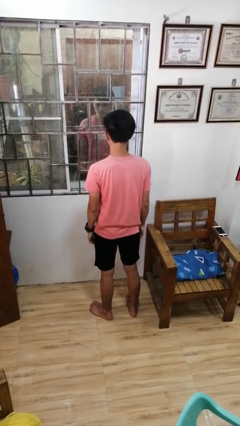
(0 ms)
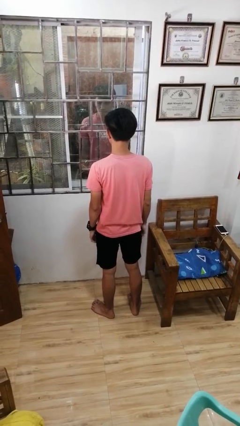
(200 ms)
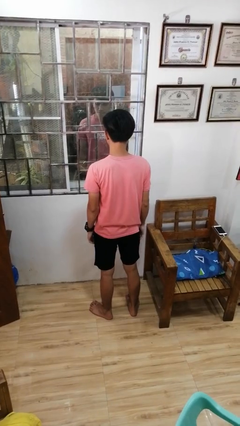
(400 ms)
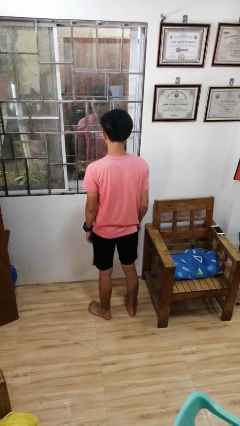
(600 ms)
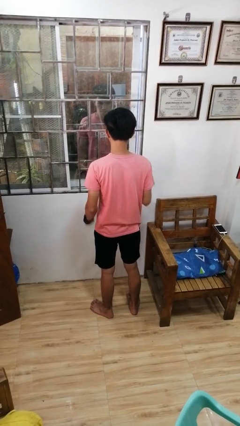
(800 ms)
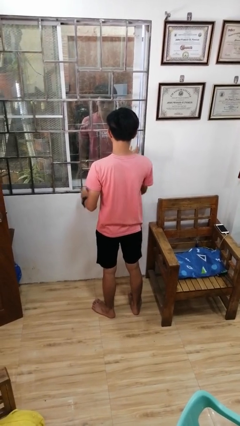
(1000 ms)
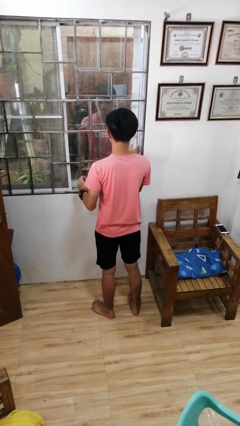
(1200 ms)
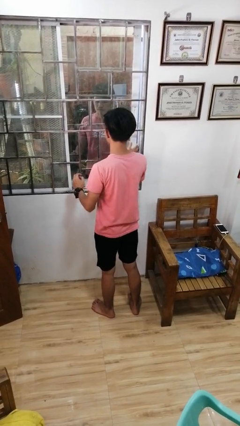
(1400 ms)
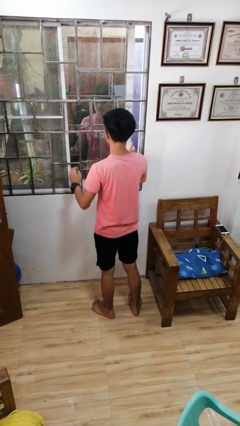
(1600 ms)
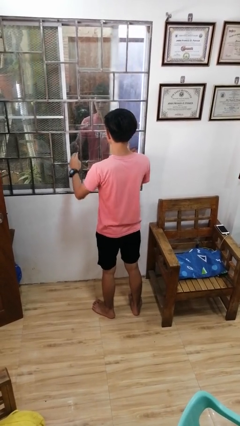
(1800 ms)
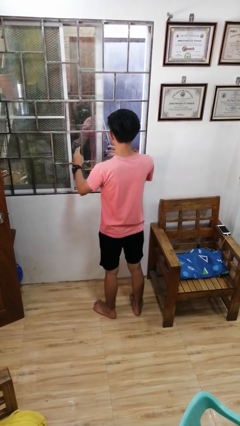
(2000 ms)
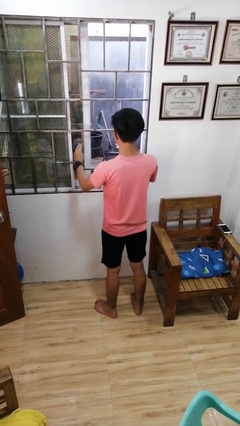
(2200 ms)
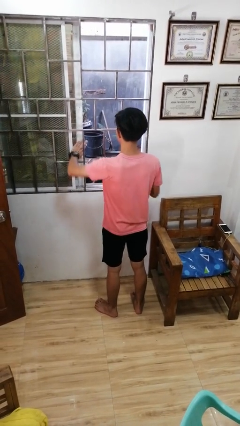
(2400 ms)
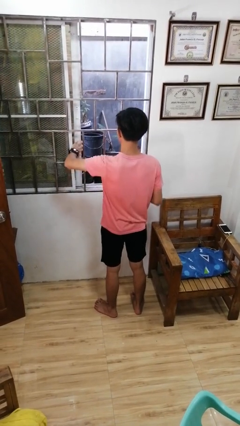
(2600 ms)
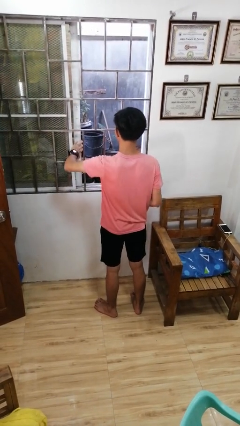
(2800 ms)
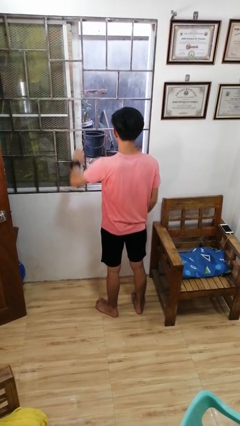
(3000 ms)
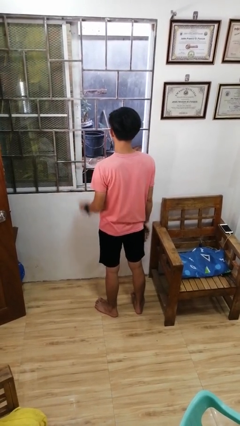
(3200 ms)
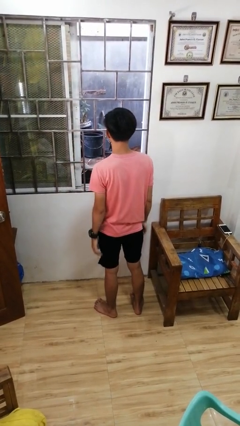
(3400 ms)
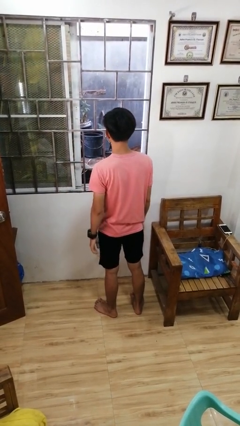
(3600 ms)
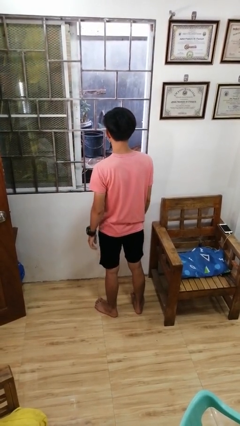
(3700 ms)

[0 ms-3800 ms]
person opens home window

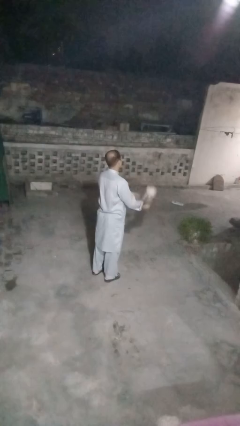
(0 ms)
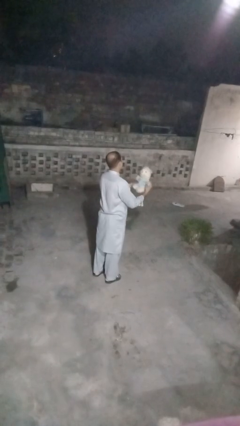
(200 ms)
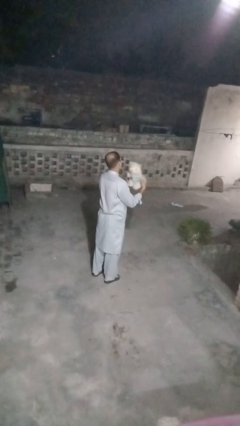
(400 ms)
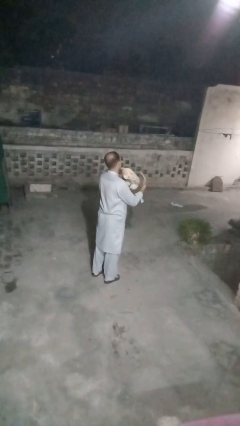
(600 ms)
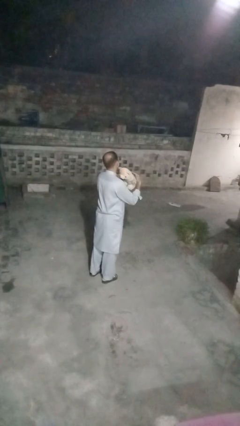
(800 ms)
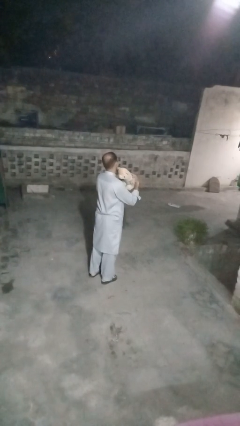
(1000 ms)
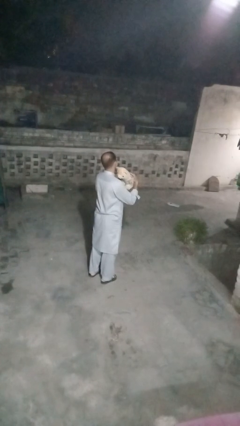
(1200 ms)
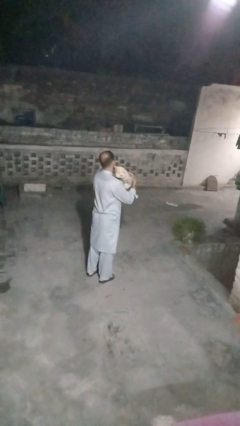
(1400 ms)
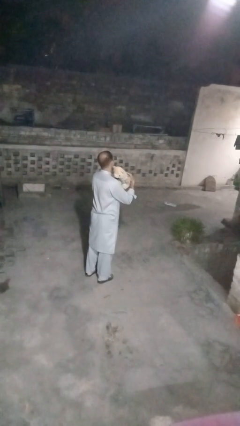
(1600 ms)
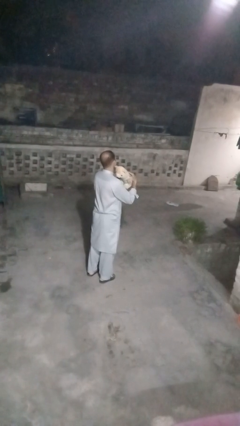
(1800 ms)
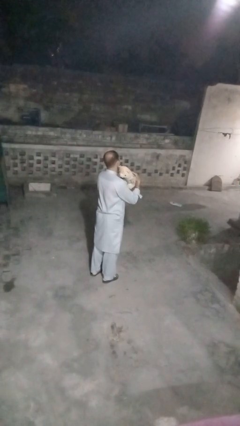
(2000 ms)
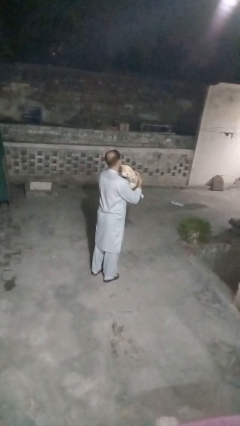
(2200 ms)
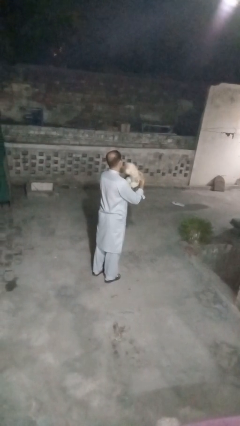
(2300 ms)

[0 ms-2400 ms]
person hugs stuffed animal

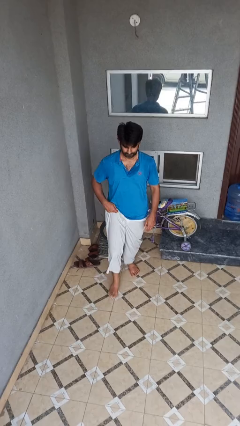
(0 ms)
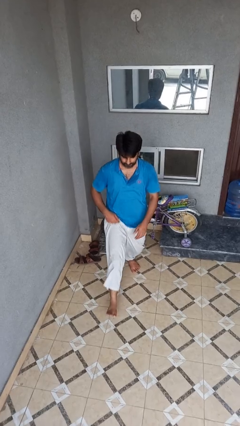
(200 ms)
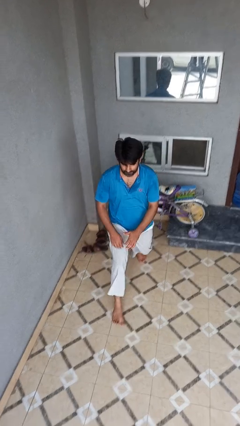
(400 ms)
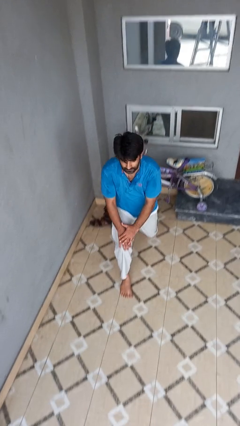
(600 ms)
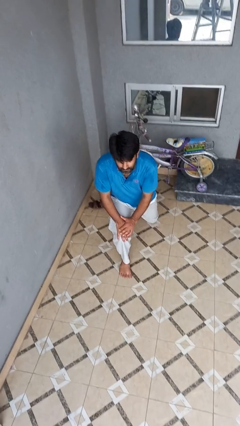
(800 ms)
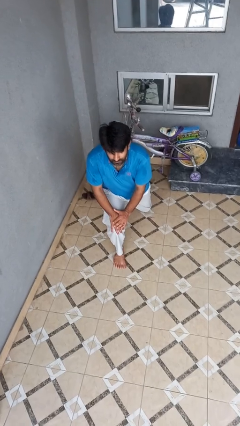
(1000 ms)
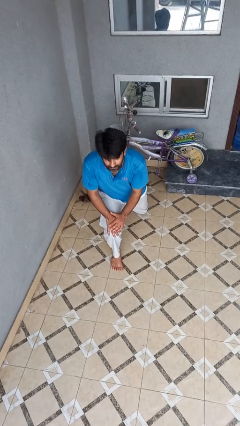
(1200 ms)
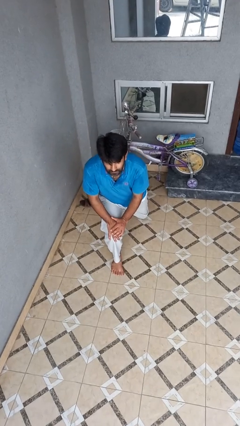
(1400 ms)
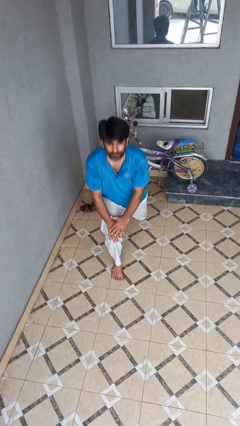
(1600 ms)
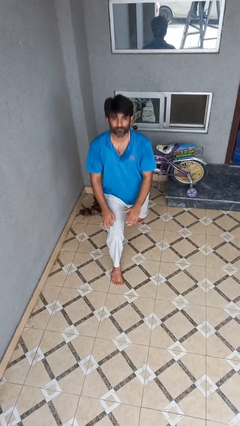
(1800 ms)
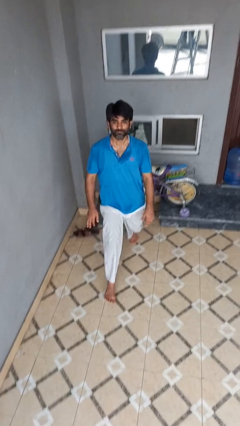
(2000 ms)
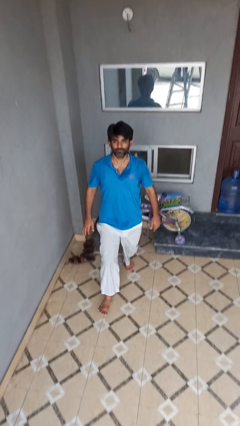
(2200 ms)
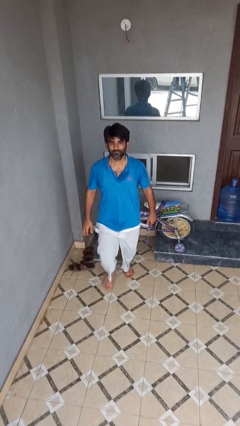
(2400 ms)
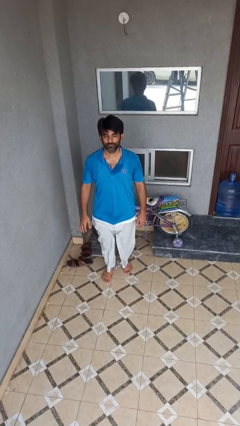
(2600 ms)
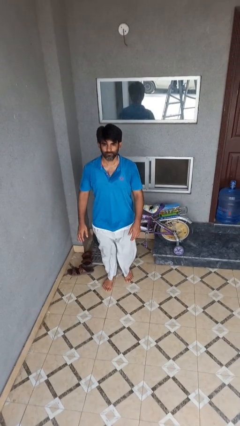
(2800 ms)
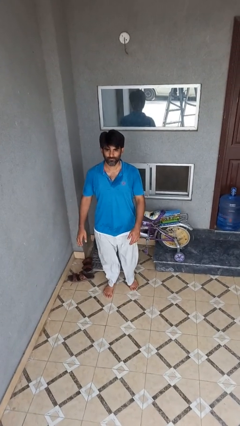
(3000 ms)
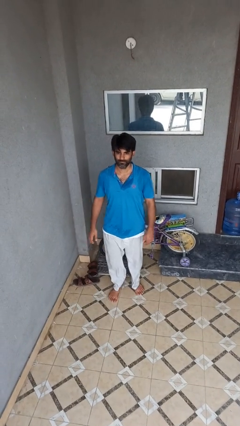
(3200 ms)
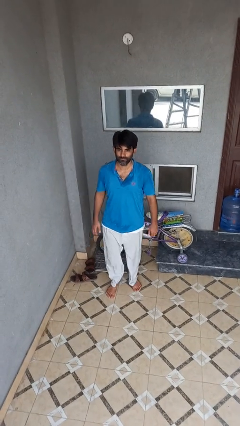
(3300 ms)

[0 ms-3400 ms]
person exercises with lunges

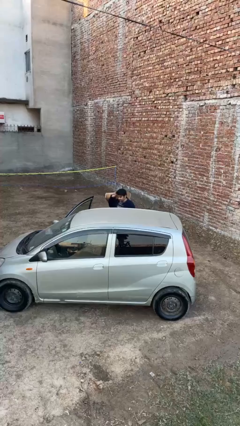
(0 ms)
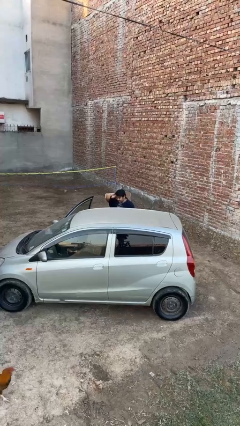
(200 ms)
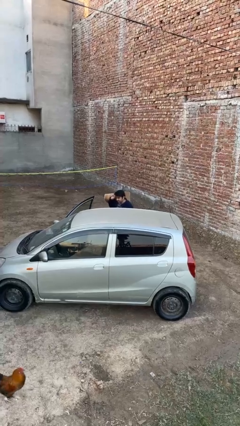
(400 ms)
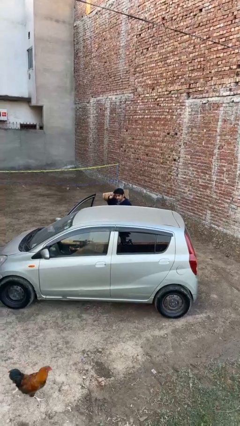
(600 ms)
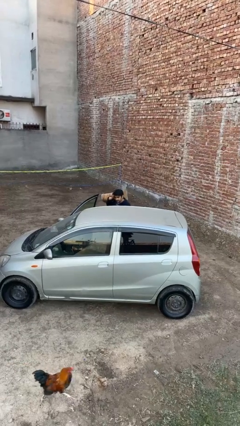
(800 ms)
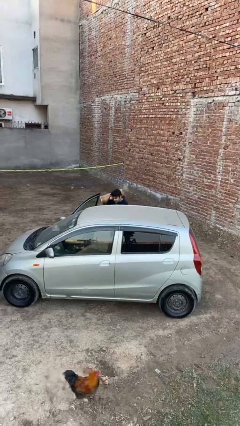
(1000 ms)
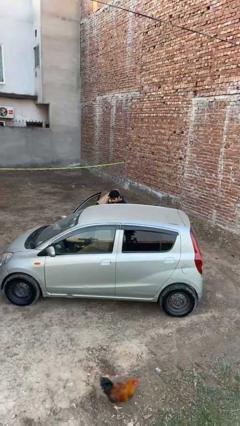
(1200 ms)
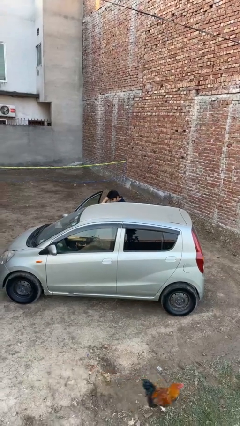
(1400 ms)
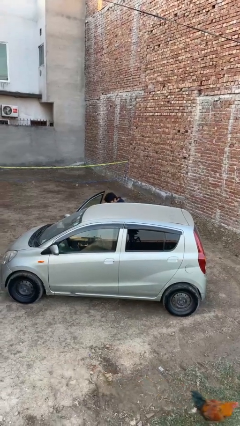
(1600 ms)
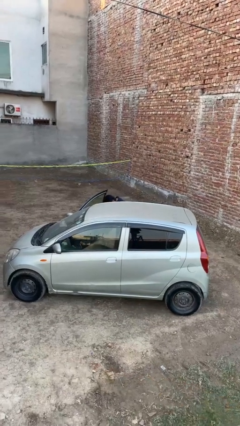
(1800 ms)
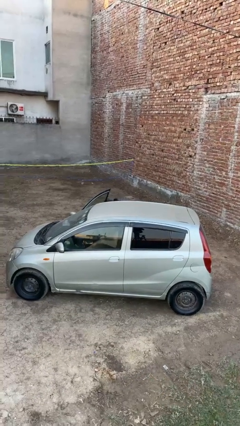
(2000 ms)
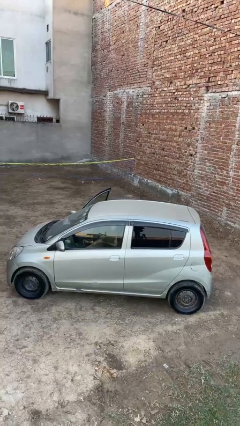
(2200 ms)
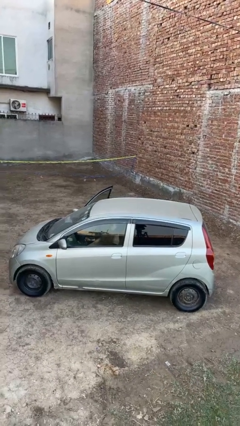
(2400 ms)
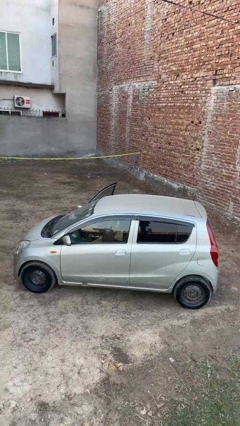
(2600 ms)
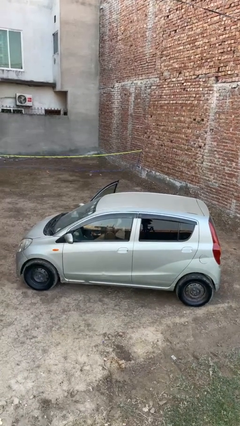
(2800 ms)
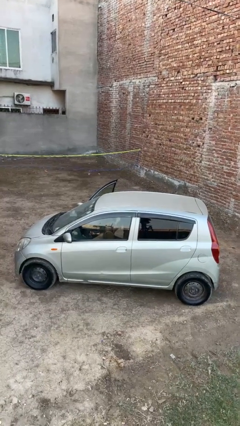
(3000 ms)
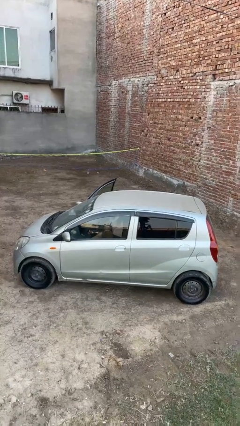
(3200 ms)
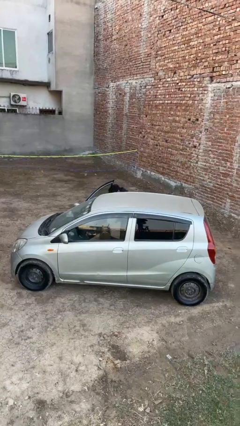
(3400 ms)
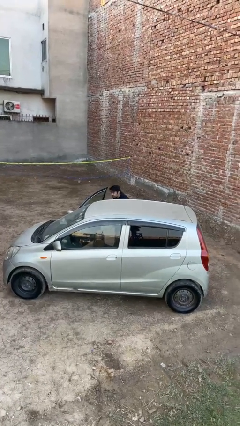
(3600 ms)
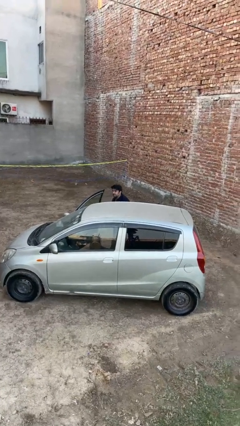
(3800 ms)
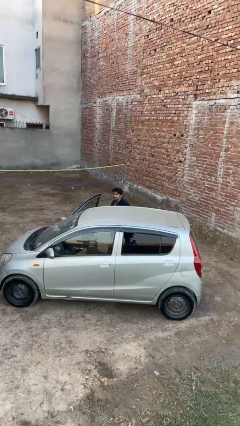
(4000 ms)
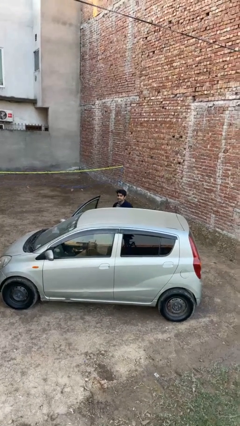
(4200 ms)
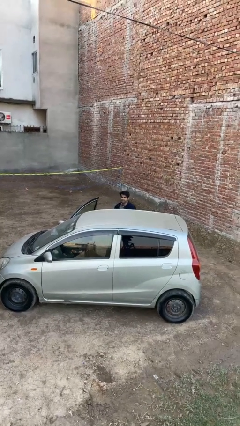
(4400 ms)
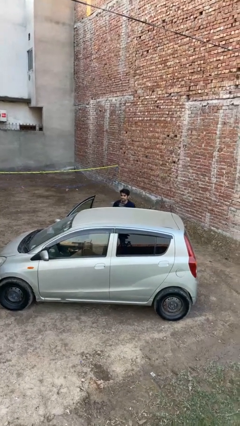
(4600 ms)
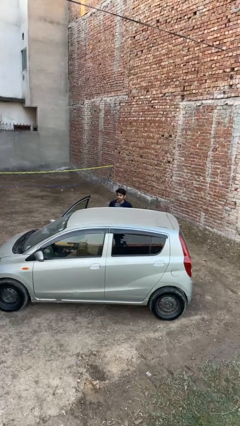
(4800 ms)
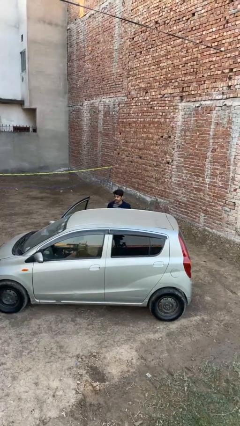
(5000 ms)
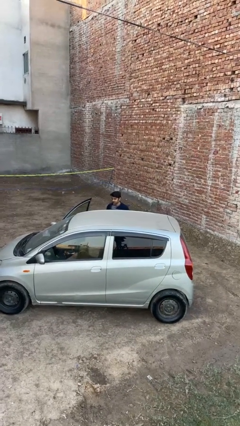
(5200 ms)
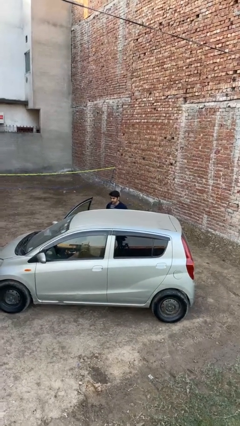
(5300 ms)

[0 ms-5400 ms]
person loads car

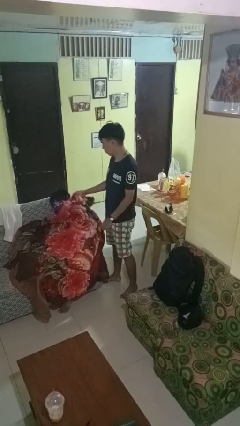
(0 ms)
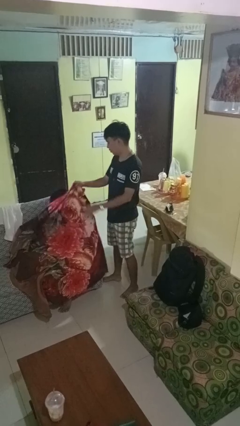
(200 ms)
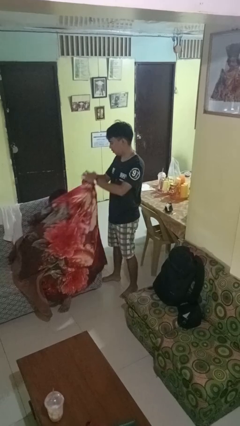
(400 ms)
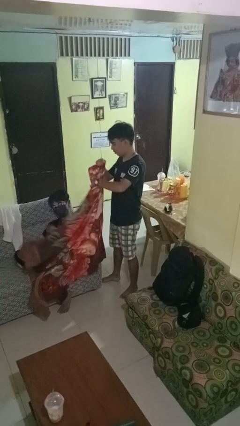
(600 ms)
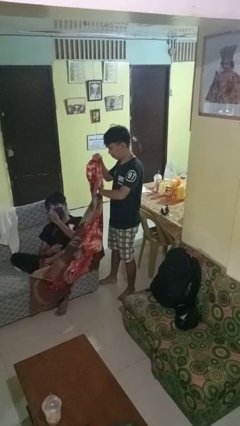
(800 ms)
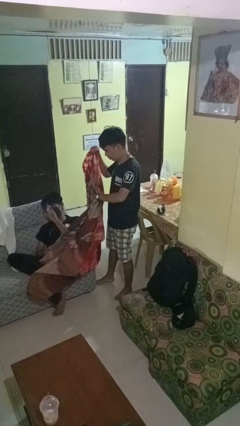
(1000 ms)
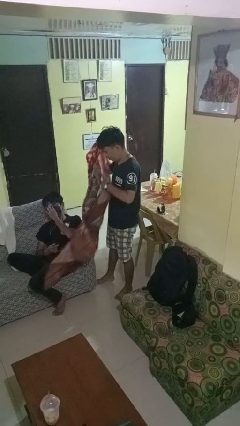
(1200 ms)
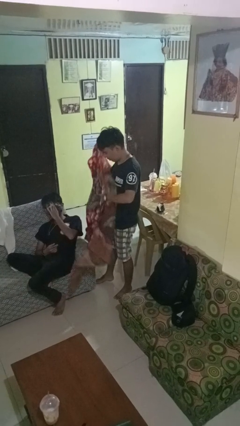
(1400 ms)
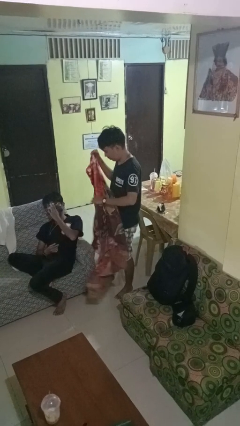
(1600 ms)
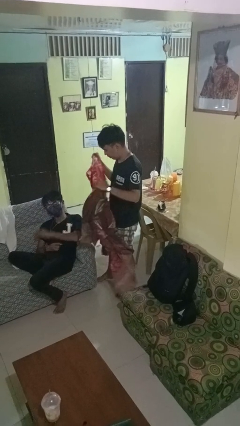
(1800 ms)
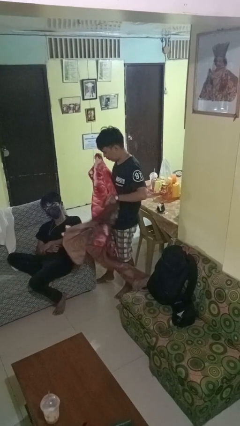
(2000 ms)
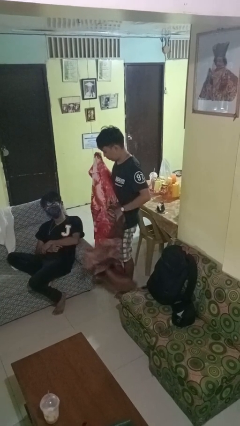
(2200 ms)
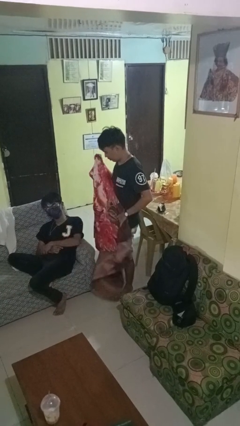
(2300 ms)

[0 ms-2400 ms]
person uncovers friend with blanket
